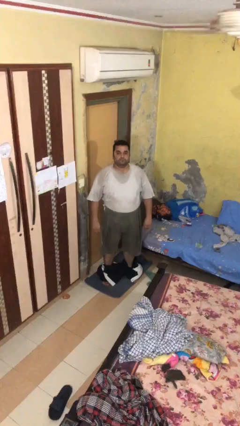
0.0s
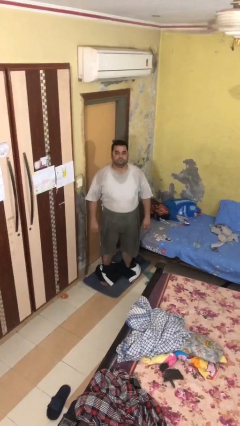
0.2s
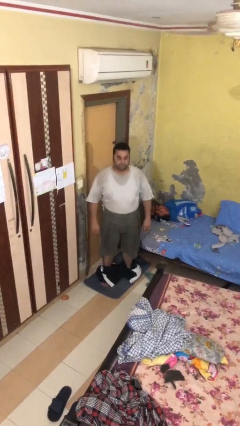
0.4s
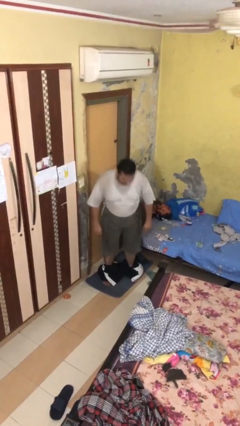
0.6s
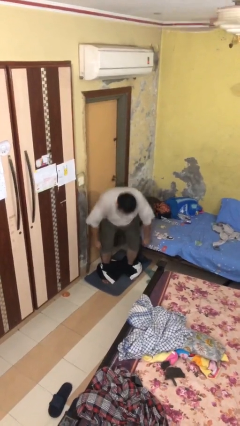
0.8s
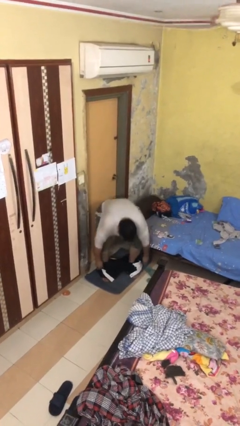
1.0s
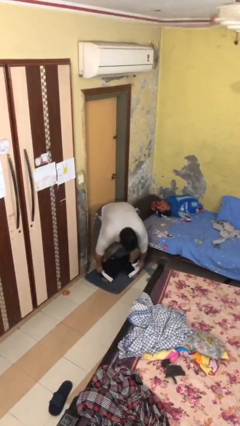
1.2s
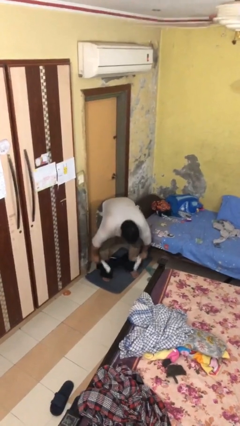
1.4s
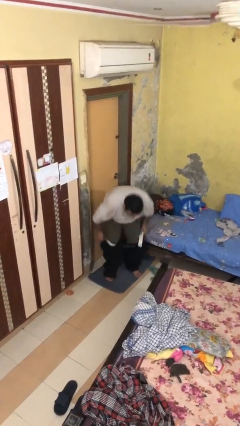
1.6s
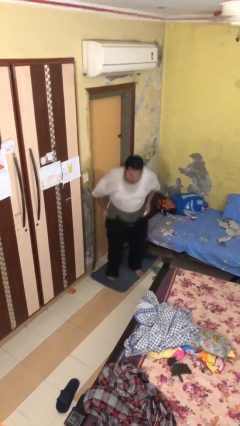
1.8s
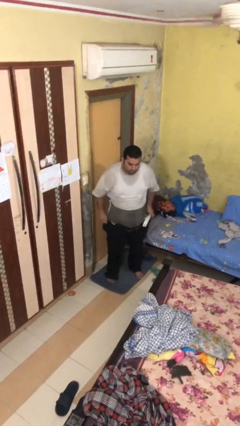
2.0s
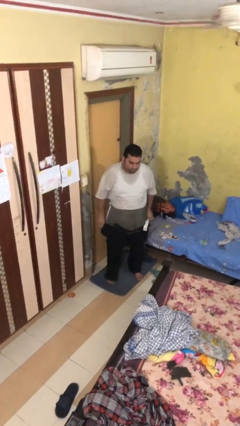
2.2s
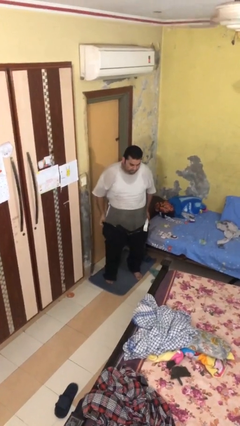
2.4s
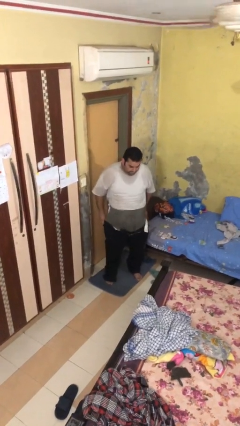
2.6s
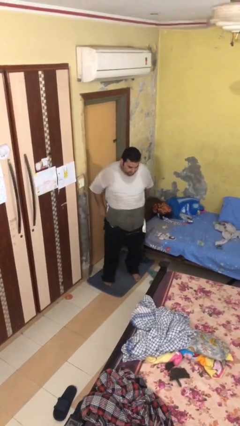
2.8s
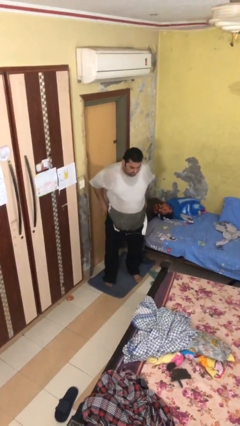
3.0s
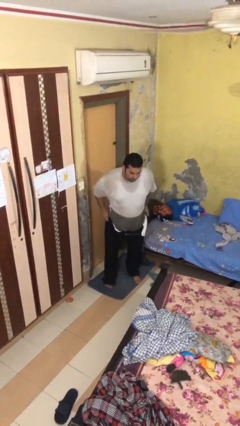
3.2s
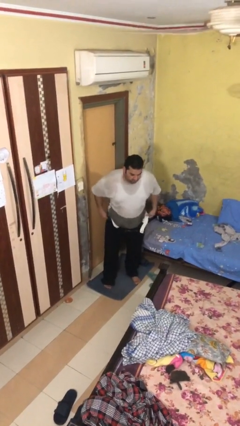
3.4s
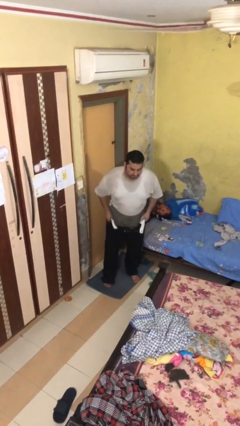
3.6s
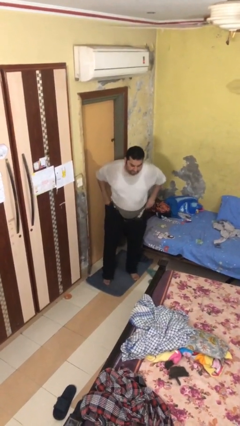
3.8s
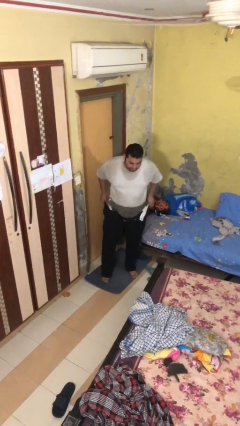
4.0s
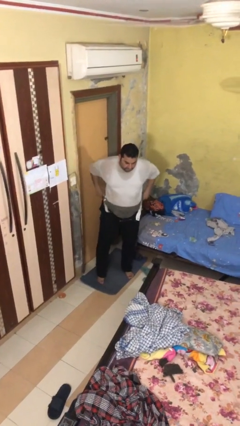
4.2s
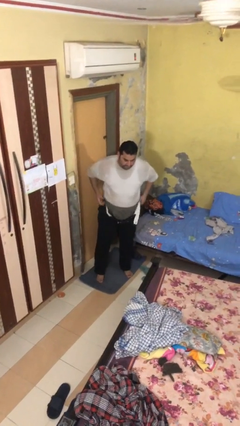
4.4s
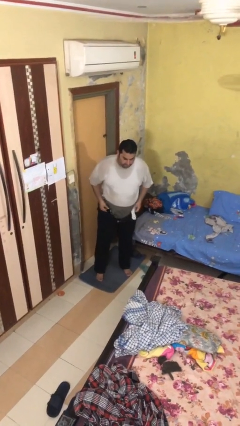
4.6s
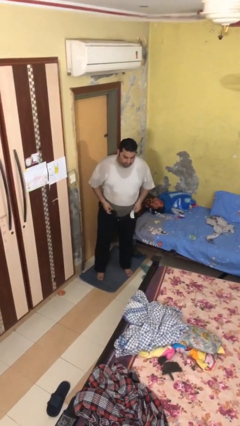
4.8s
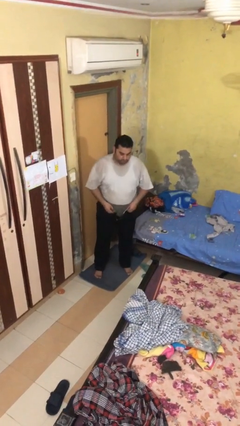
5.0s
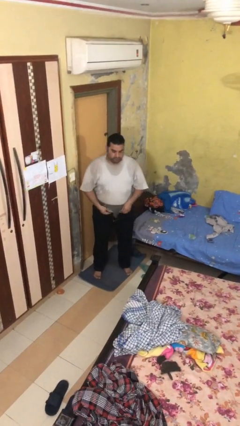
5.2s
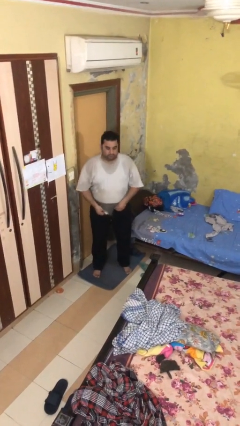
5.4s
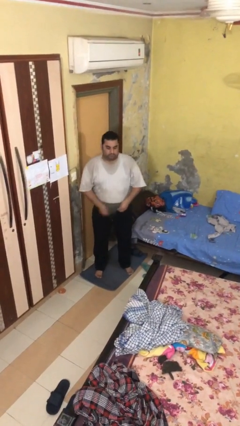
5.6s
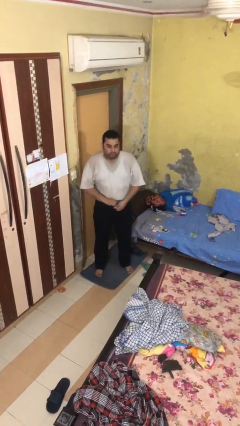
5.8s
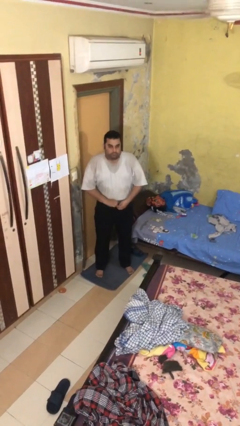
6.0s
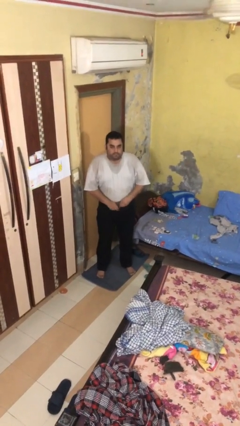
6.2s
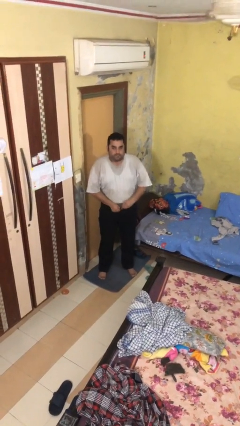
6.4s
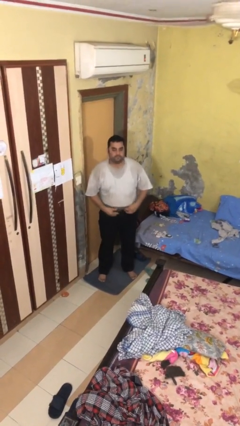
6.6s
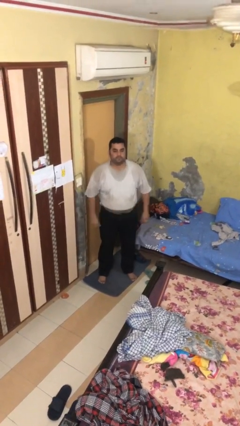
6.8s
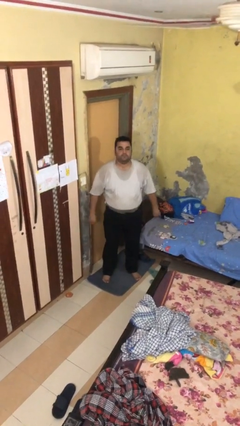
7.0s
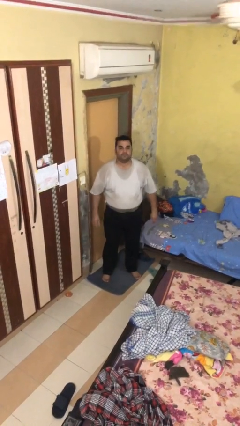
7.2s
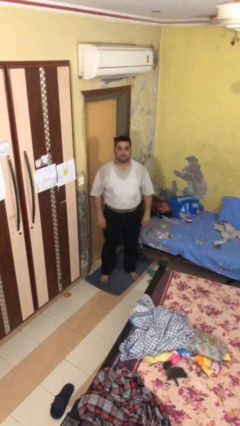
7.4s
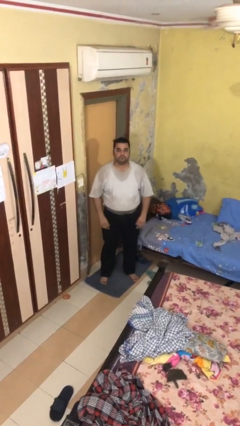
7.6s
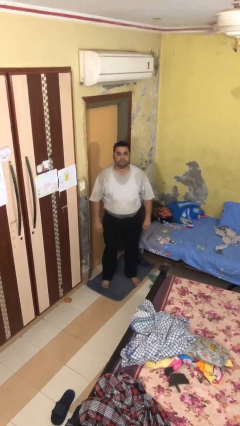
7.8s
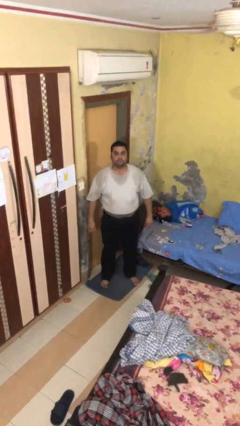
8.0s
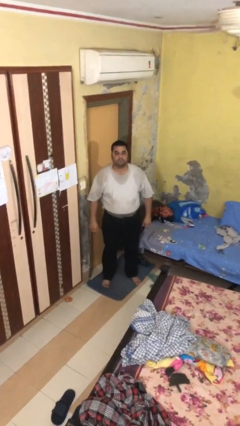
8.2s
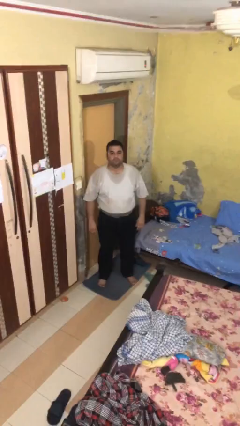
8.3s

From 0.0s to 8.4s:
person puts on pants

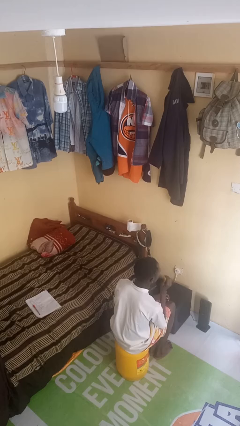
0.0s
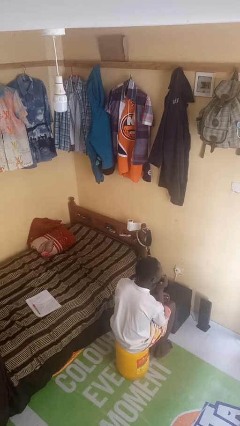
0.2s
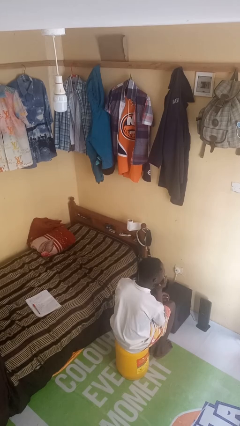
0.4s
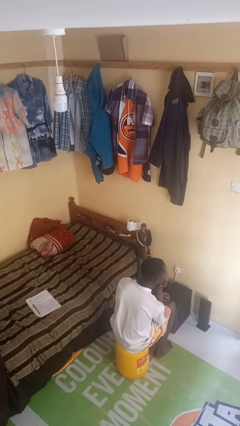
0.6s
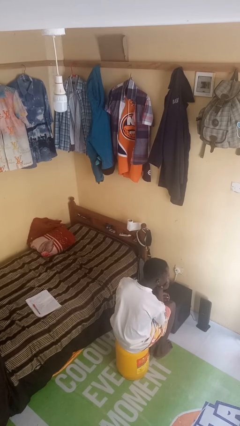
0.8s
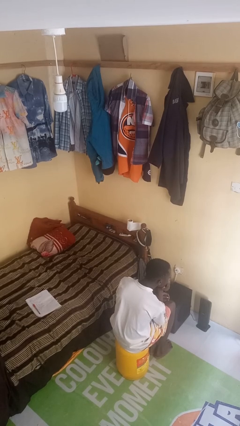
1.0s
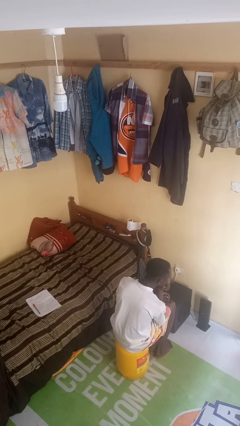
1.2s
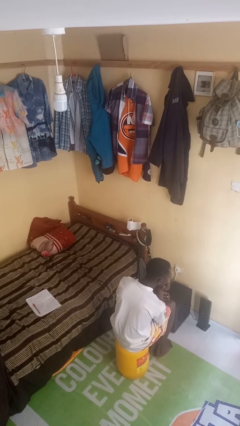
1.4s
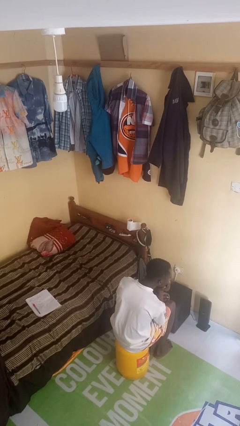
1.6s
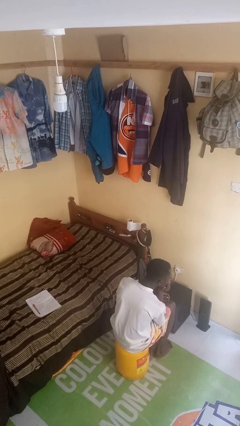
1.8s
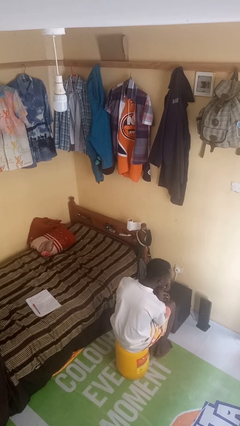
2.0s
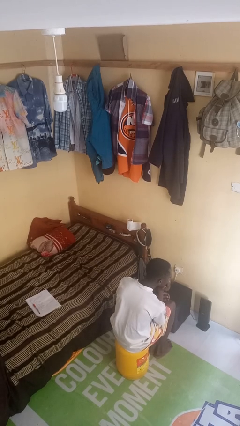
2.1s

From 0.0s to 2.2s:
person strokes chin

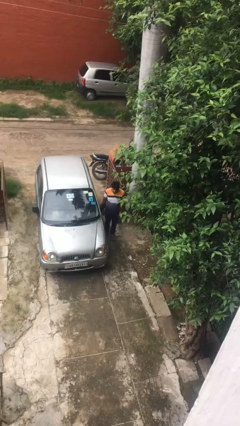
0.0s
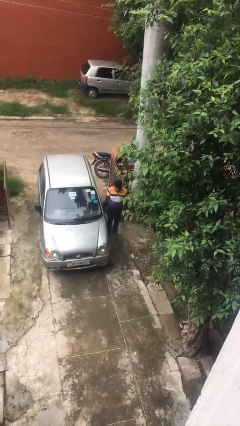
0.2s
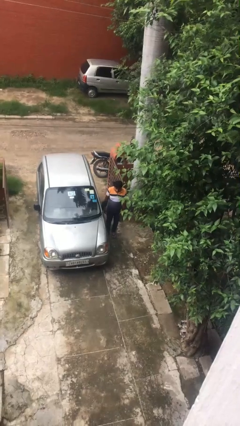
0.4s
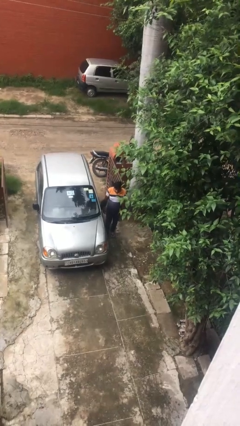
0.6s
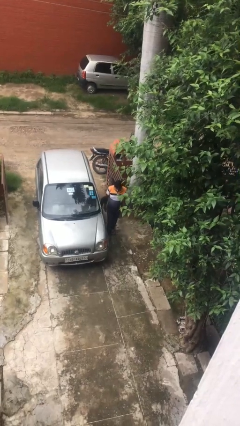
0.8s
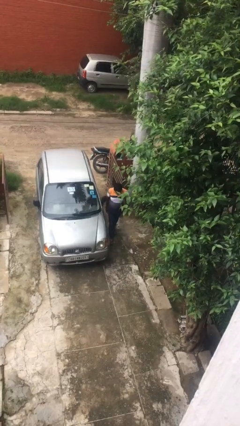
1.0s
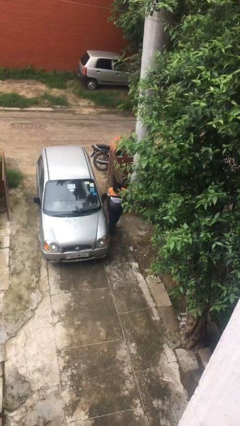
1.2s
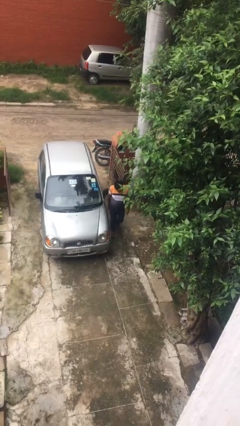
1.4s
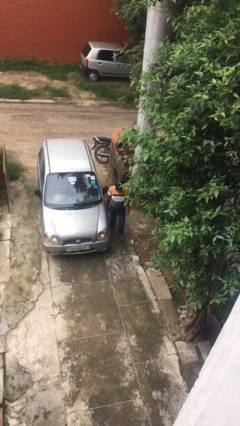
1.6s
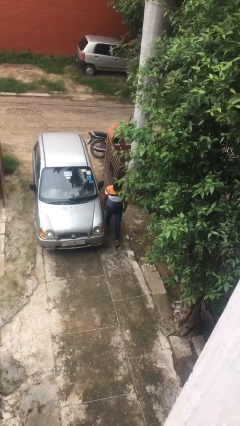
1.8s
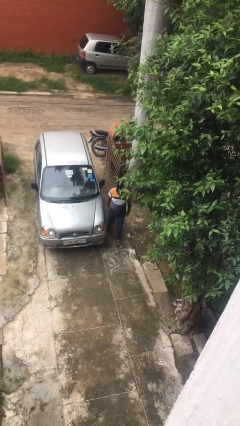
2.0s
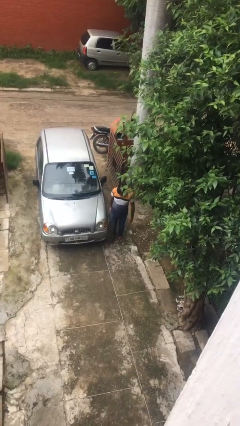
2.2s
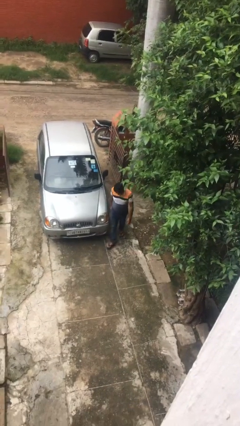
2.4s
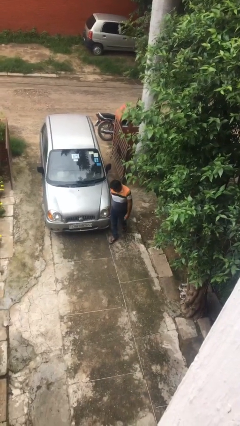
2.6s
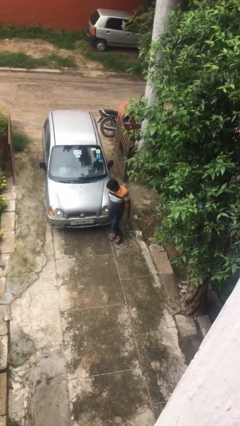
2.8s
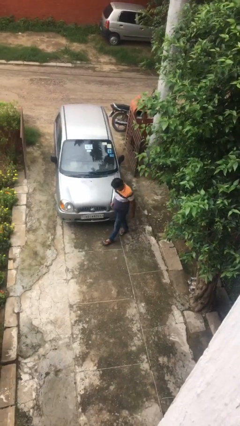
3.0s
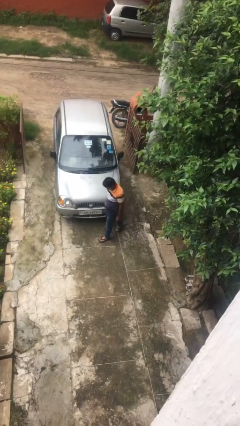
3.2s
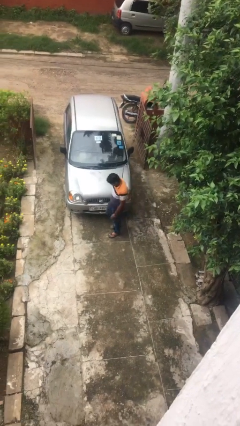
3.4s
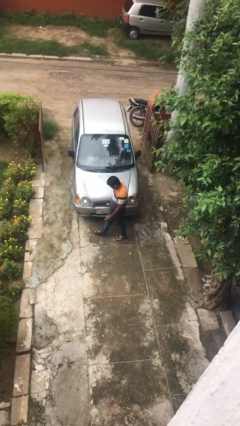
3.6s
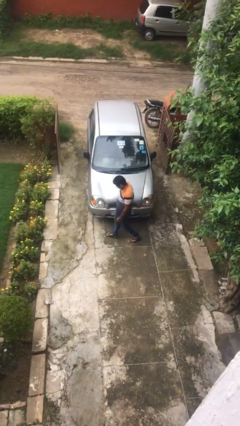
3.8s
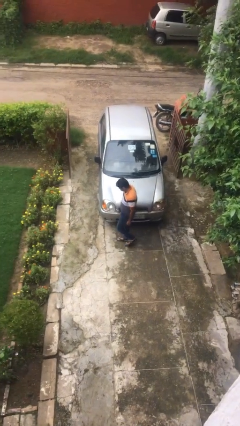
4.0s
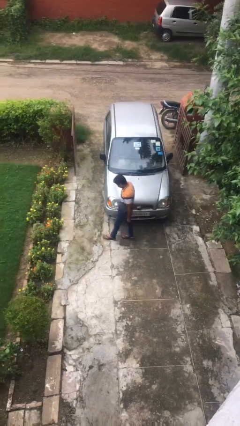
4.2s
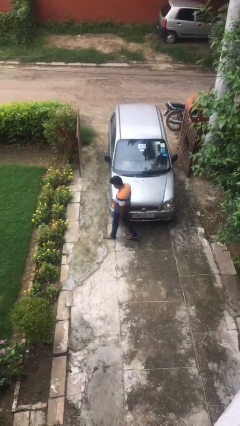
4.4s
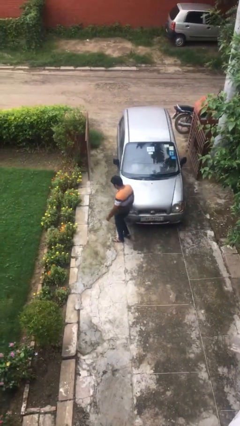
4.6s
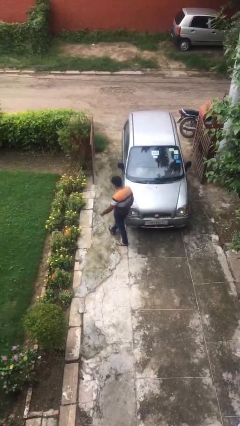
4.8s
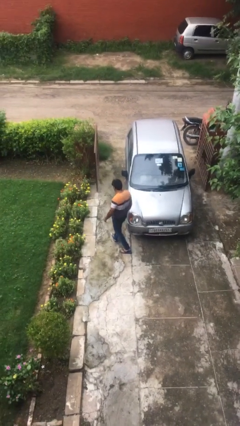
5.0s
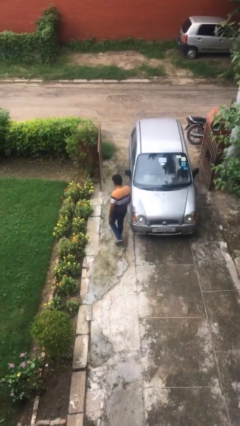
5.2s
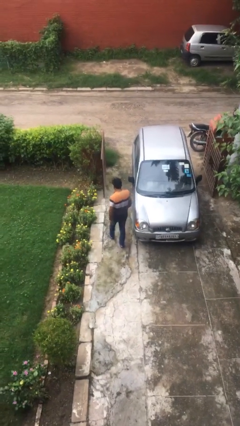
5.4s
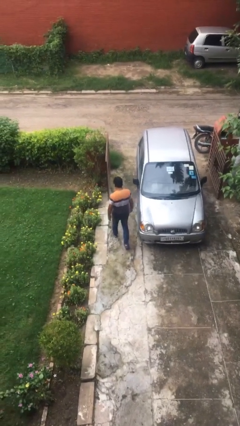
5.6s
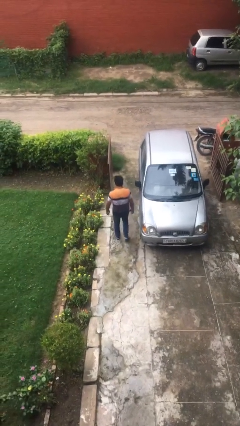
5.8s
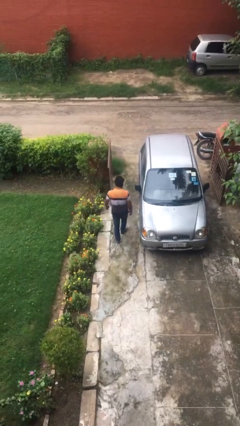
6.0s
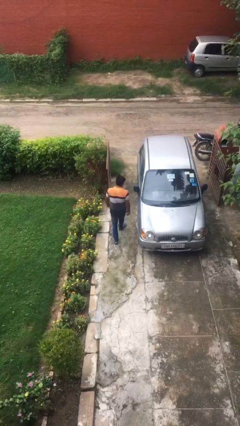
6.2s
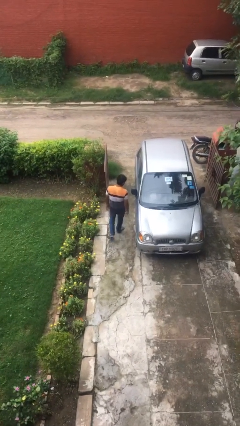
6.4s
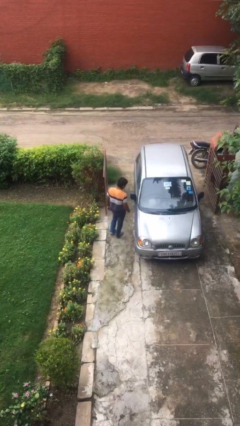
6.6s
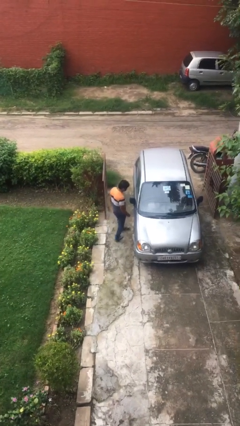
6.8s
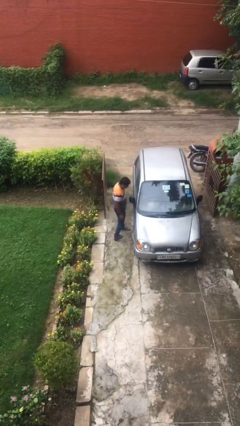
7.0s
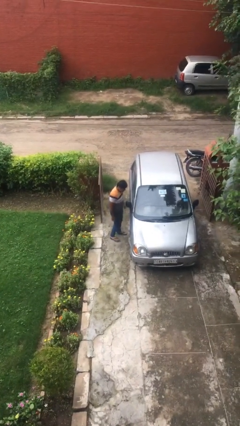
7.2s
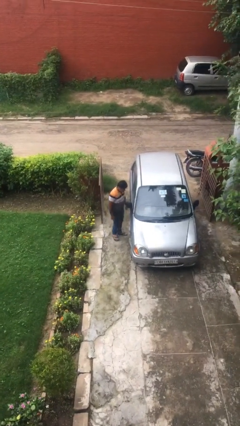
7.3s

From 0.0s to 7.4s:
person walks around car

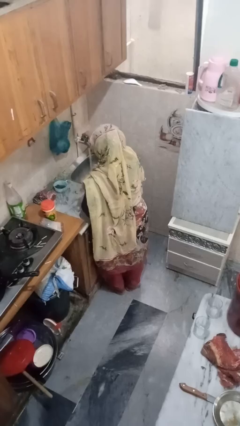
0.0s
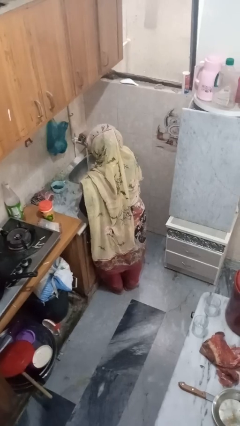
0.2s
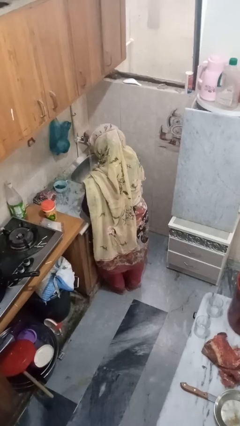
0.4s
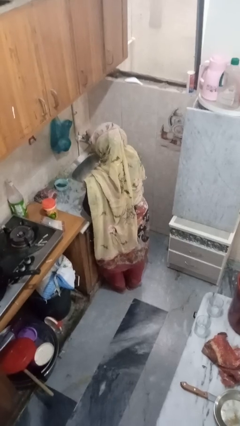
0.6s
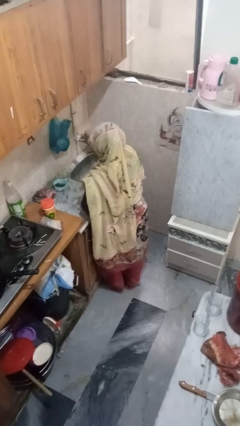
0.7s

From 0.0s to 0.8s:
person turns off faucet
